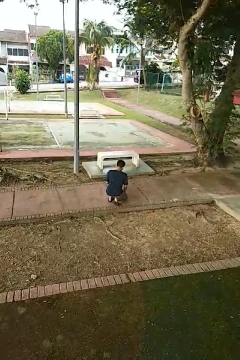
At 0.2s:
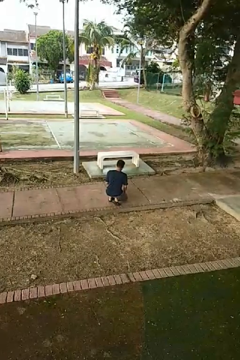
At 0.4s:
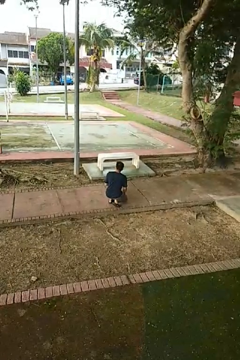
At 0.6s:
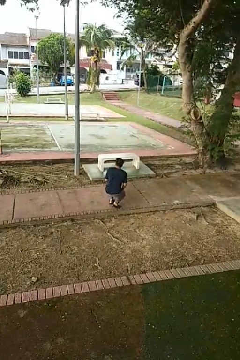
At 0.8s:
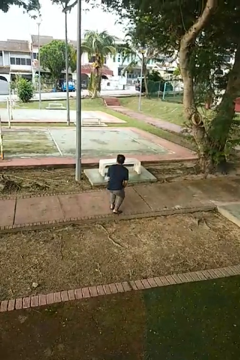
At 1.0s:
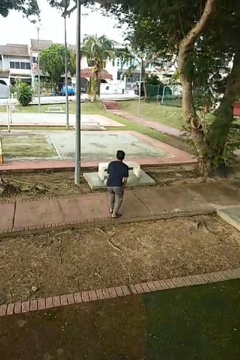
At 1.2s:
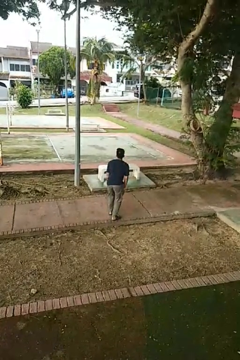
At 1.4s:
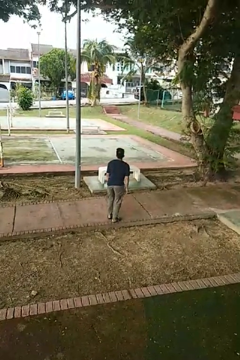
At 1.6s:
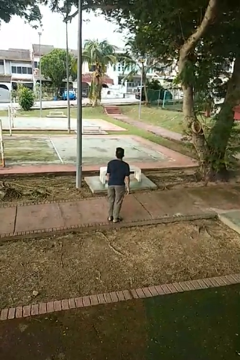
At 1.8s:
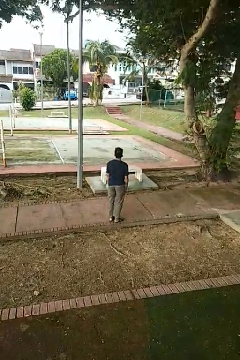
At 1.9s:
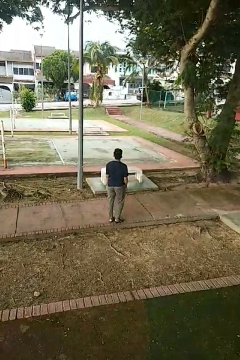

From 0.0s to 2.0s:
person stands up from floor

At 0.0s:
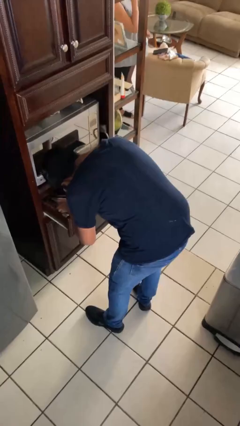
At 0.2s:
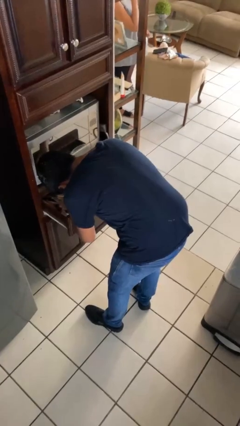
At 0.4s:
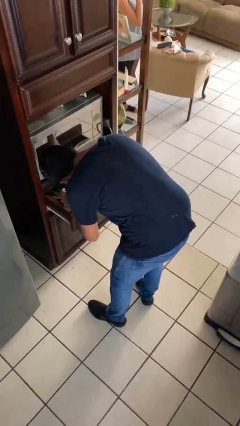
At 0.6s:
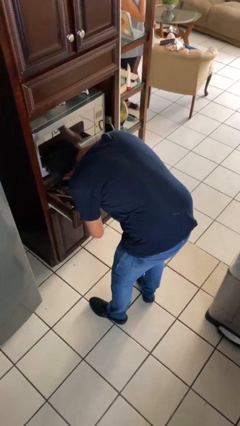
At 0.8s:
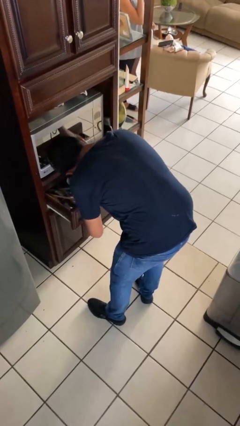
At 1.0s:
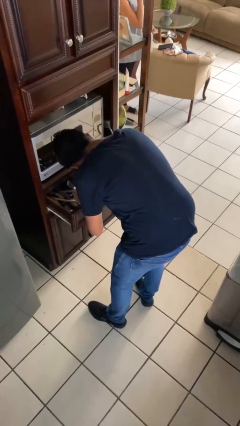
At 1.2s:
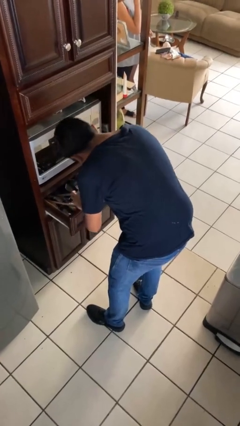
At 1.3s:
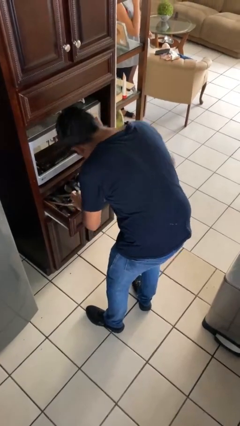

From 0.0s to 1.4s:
person searches in kitchen drawer

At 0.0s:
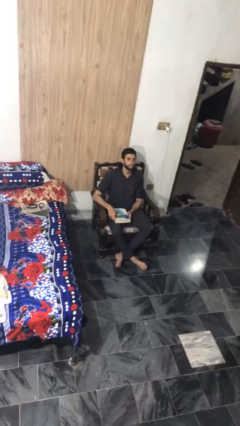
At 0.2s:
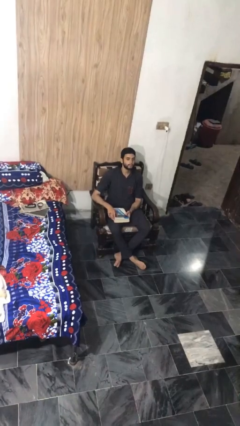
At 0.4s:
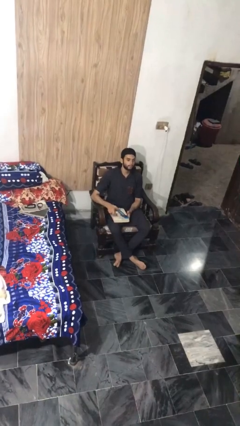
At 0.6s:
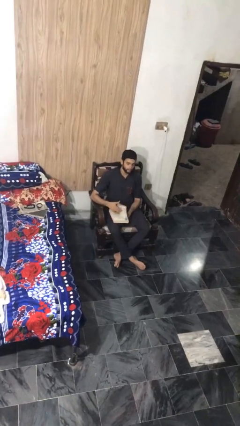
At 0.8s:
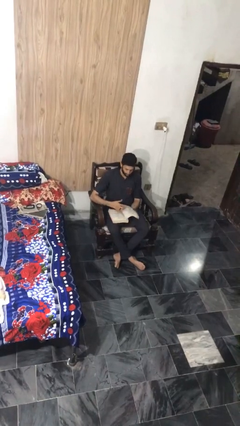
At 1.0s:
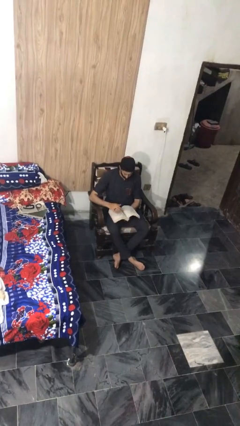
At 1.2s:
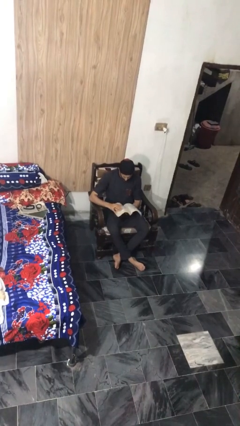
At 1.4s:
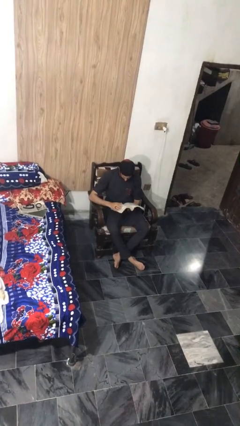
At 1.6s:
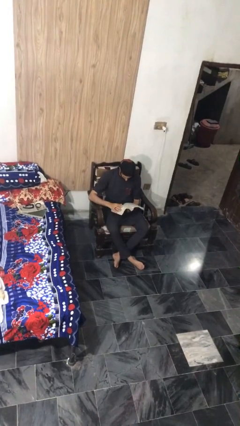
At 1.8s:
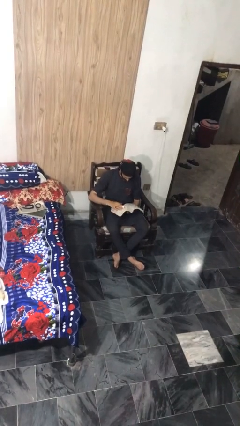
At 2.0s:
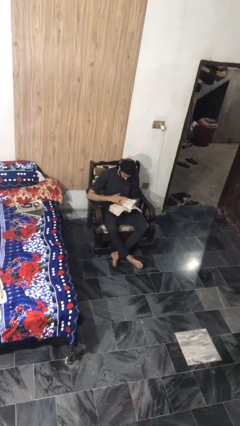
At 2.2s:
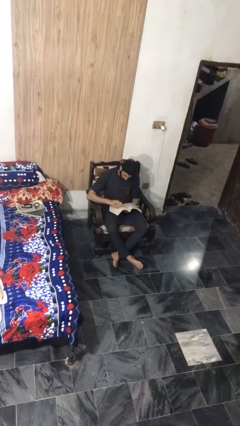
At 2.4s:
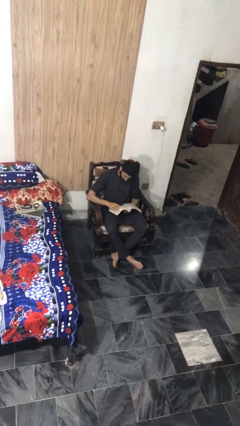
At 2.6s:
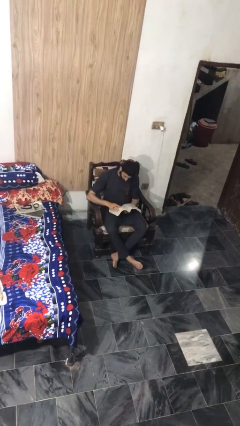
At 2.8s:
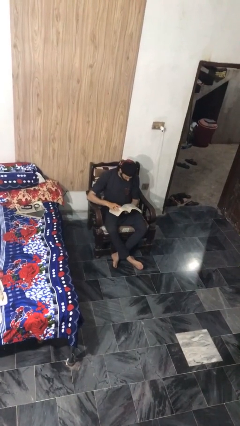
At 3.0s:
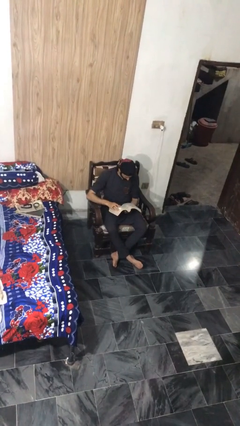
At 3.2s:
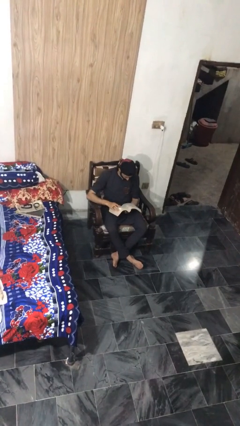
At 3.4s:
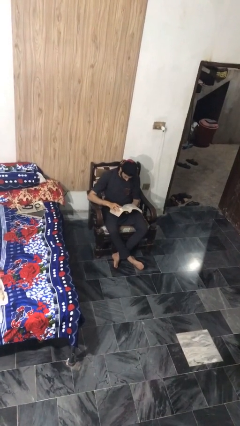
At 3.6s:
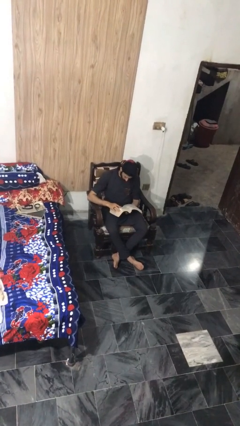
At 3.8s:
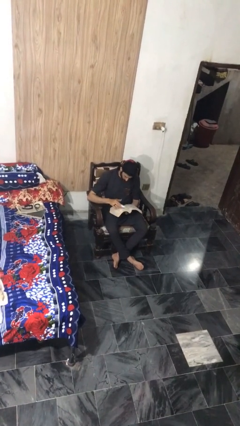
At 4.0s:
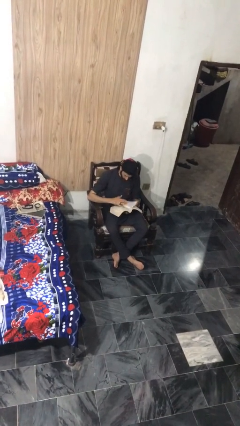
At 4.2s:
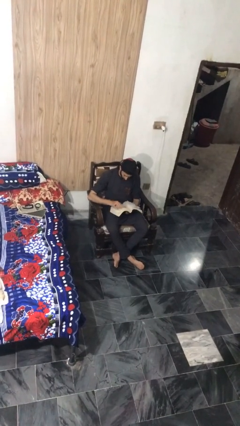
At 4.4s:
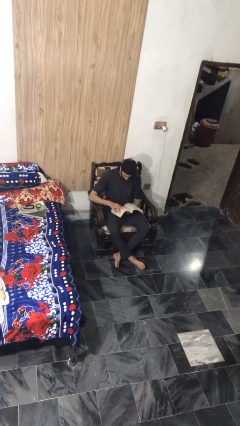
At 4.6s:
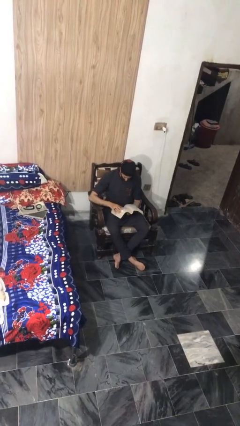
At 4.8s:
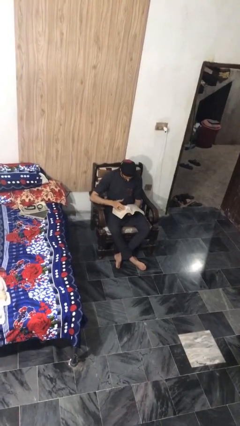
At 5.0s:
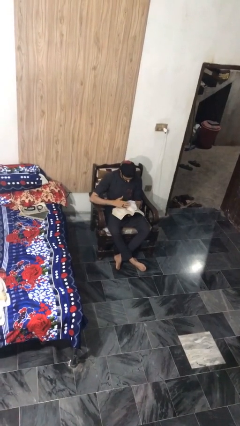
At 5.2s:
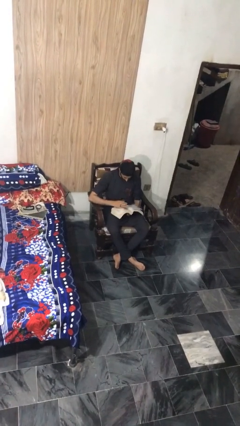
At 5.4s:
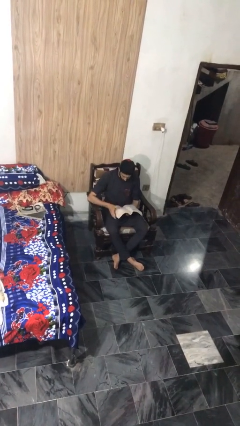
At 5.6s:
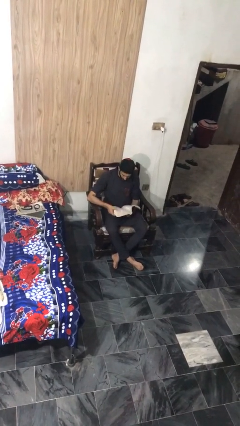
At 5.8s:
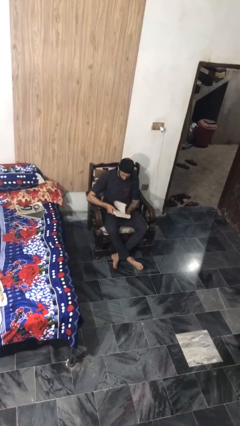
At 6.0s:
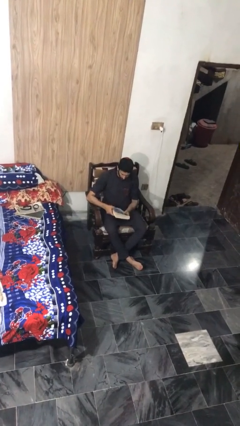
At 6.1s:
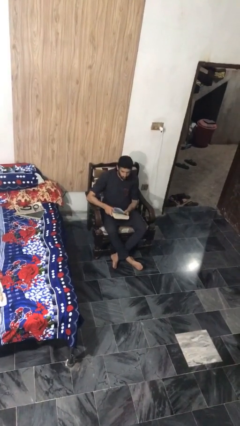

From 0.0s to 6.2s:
person reads book

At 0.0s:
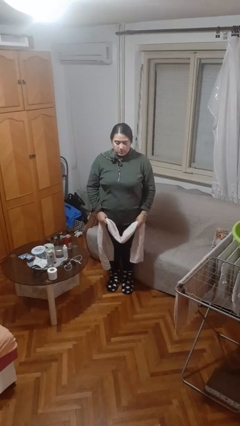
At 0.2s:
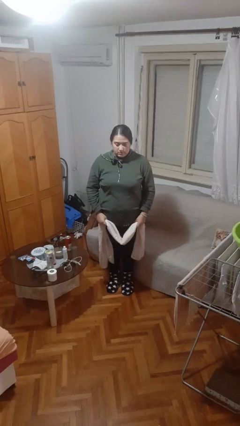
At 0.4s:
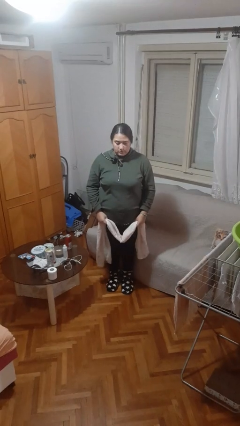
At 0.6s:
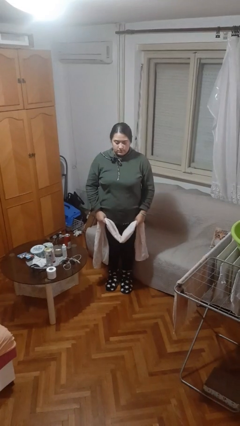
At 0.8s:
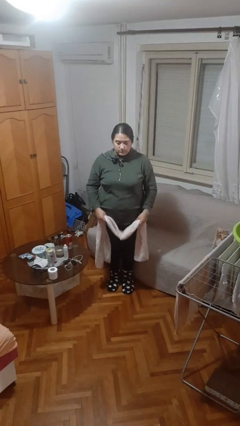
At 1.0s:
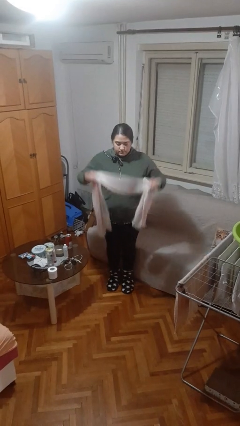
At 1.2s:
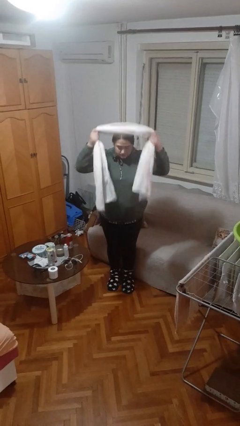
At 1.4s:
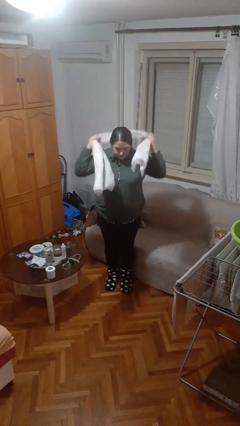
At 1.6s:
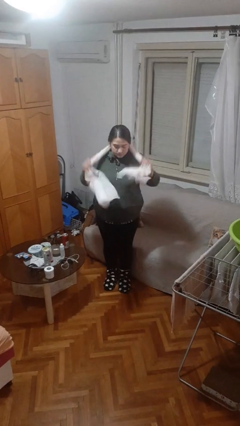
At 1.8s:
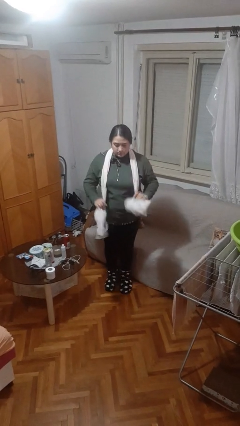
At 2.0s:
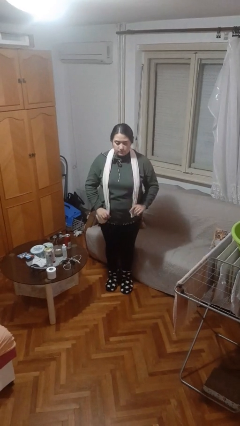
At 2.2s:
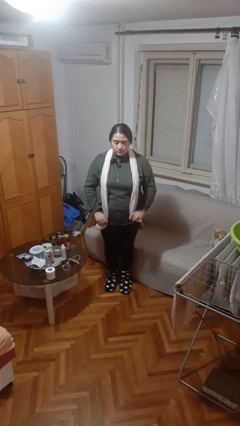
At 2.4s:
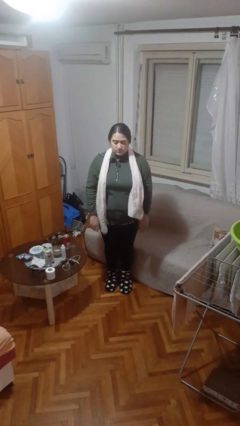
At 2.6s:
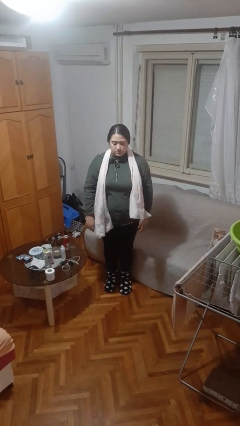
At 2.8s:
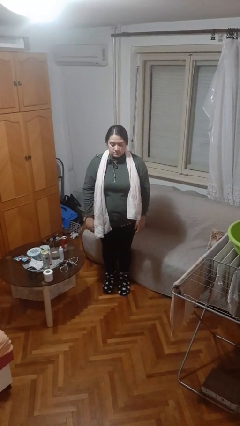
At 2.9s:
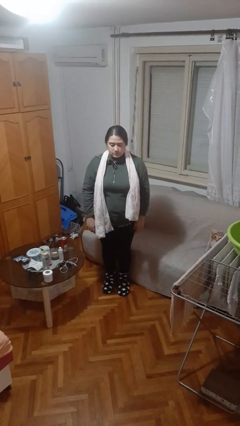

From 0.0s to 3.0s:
person puts on scarf

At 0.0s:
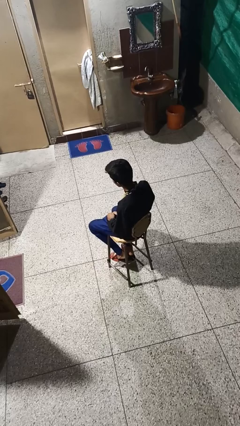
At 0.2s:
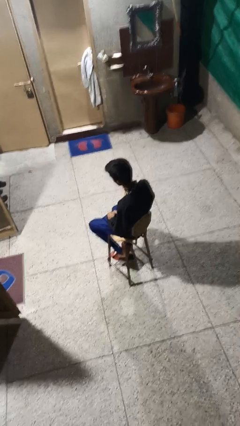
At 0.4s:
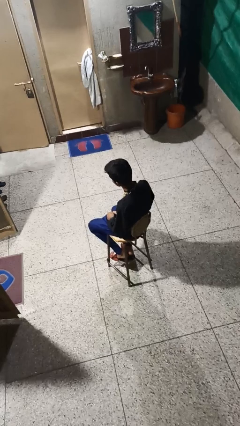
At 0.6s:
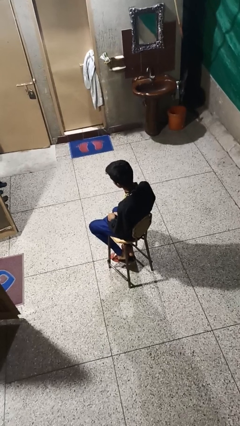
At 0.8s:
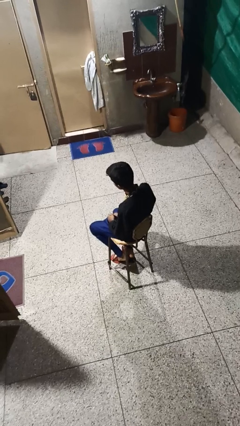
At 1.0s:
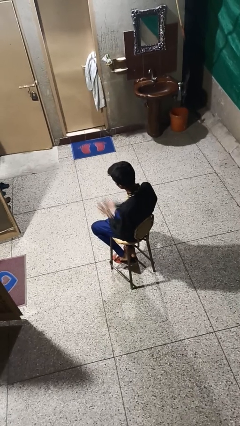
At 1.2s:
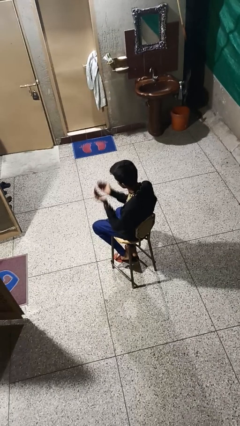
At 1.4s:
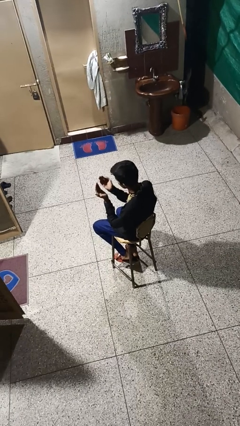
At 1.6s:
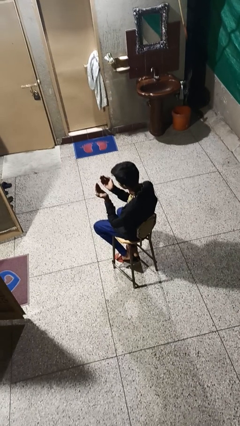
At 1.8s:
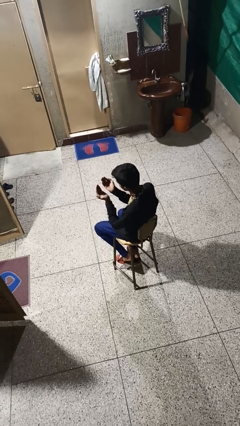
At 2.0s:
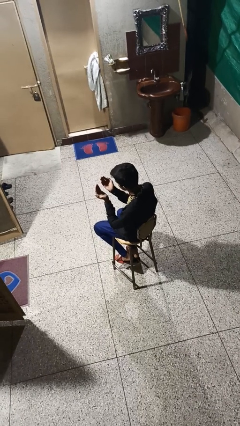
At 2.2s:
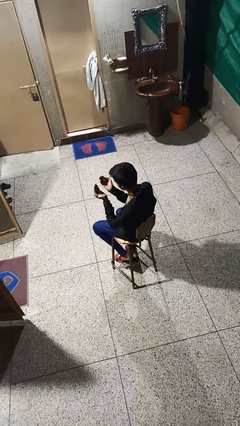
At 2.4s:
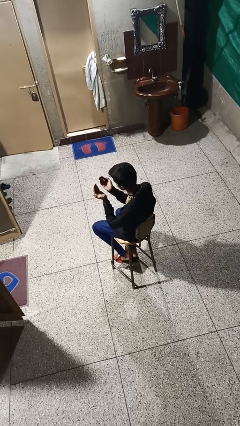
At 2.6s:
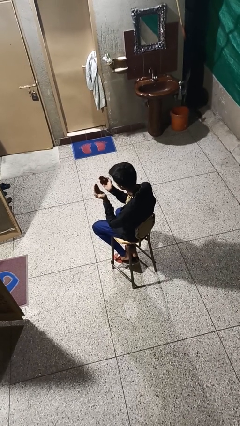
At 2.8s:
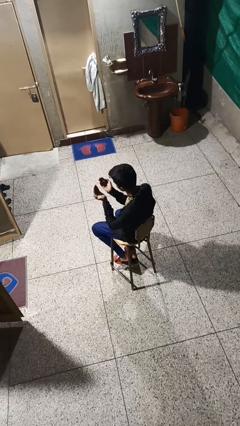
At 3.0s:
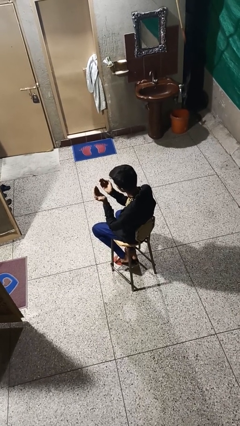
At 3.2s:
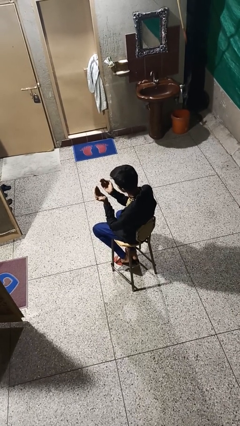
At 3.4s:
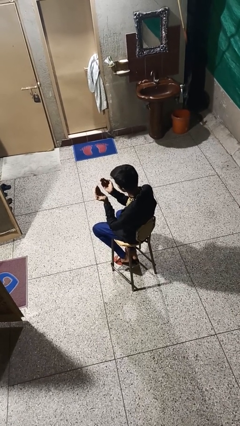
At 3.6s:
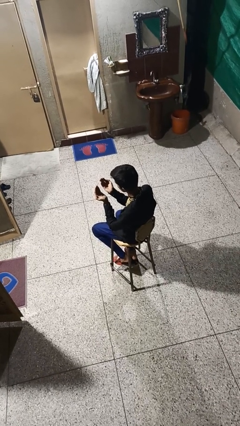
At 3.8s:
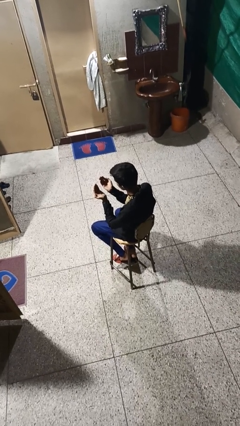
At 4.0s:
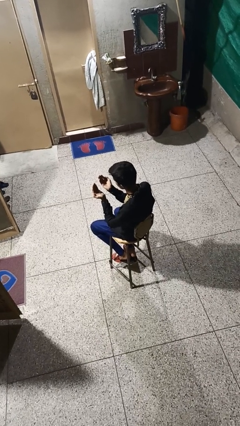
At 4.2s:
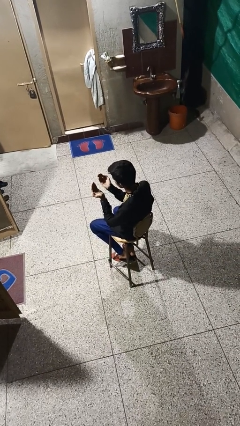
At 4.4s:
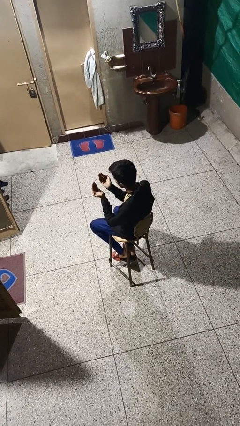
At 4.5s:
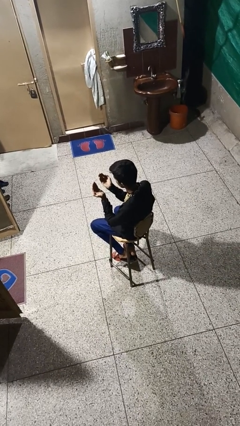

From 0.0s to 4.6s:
person prays

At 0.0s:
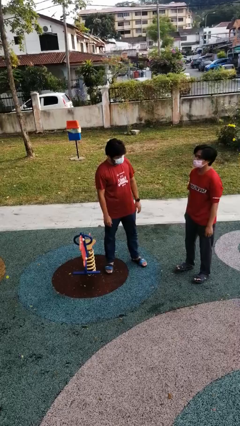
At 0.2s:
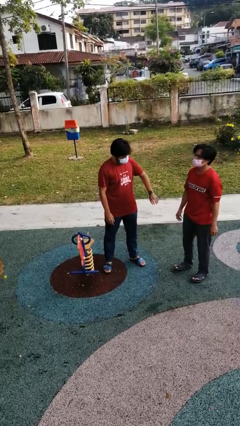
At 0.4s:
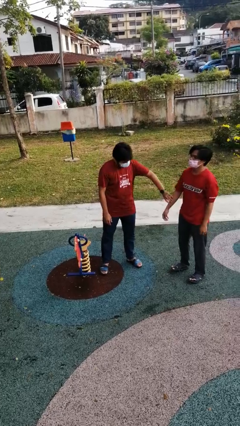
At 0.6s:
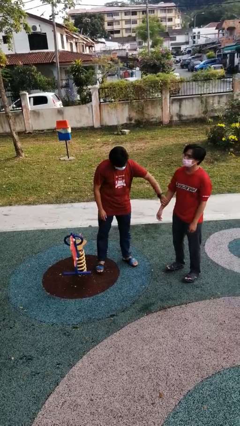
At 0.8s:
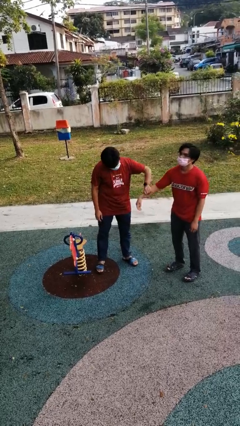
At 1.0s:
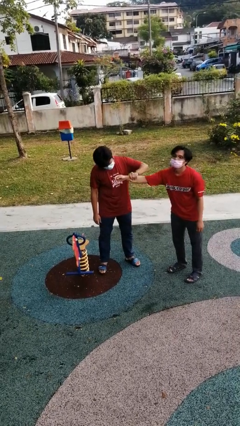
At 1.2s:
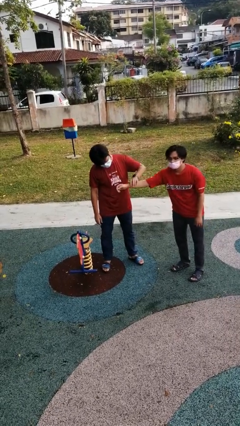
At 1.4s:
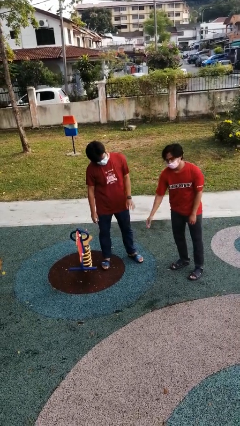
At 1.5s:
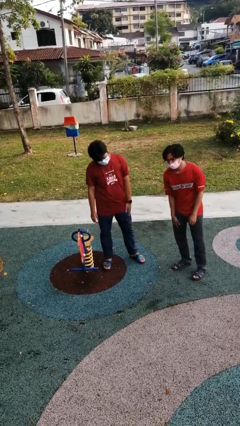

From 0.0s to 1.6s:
person grabs person by forearm
